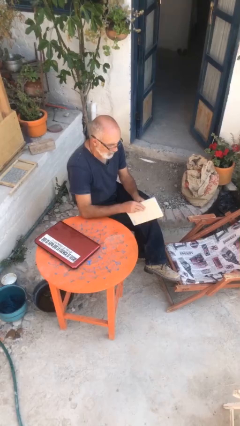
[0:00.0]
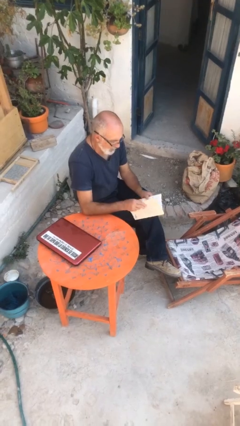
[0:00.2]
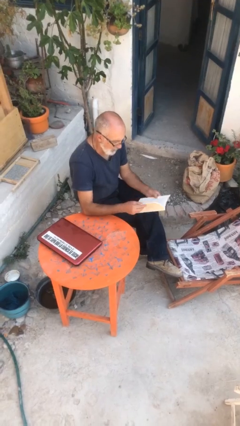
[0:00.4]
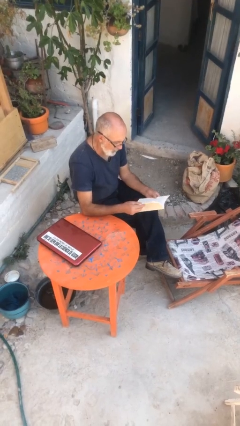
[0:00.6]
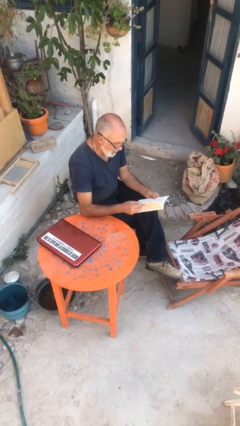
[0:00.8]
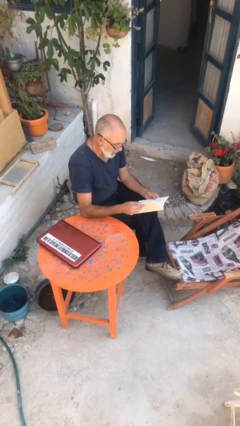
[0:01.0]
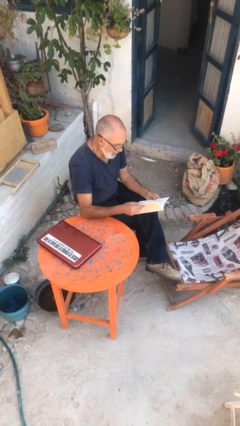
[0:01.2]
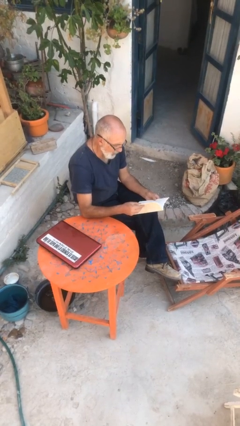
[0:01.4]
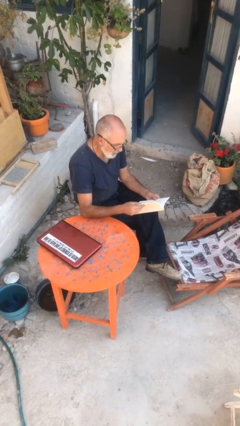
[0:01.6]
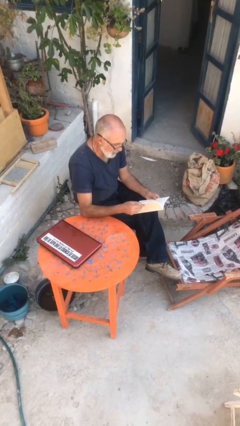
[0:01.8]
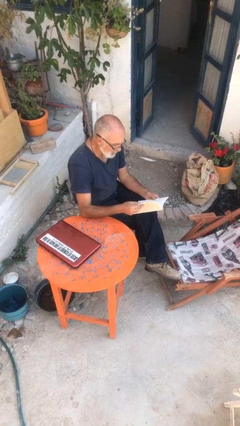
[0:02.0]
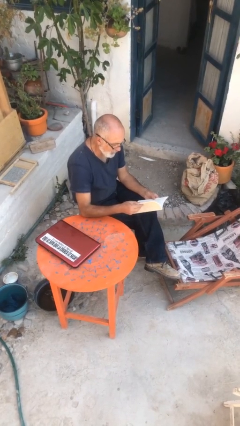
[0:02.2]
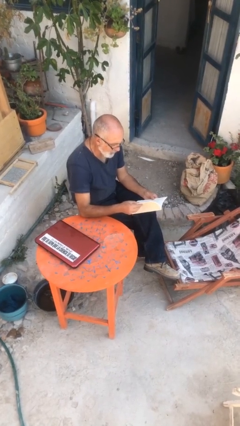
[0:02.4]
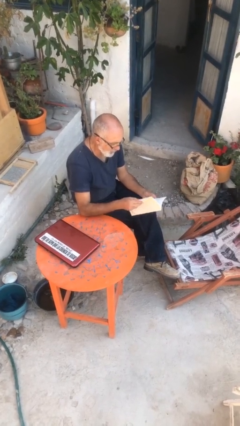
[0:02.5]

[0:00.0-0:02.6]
person reads document

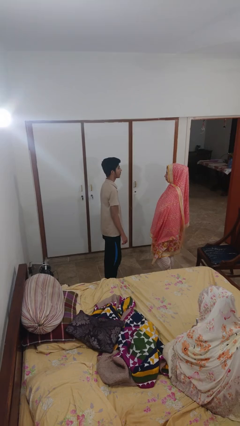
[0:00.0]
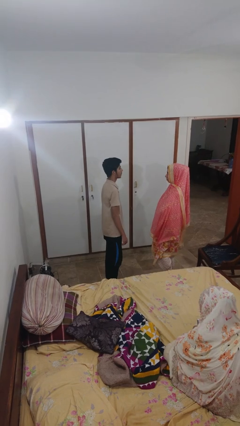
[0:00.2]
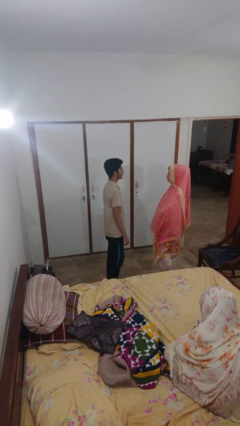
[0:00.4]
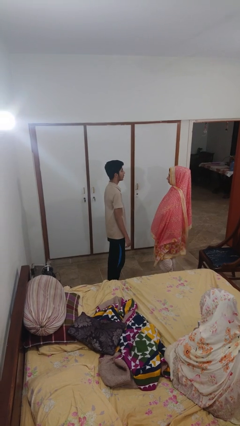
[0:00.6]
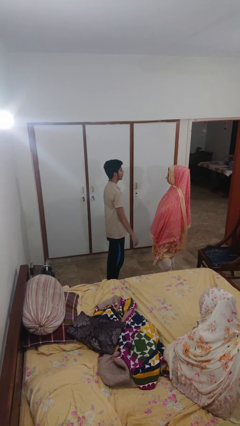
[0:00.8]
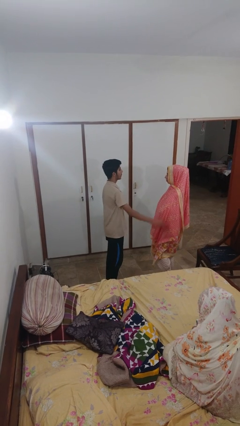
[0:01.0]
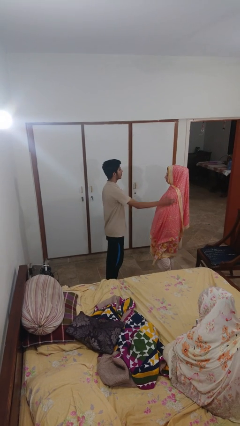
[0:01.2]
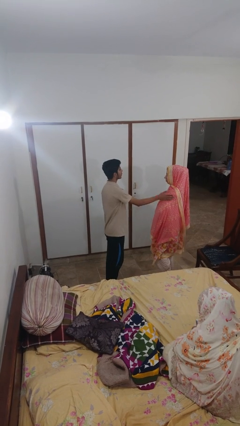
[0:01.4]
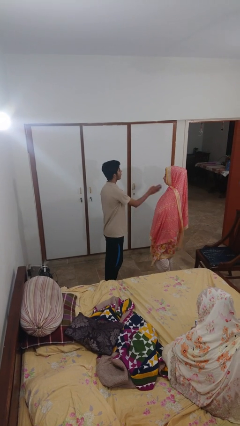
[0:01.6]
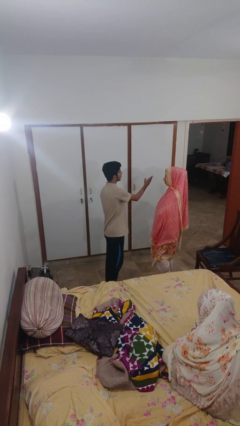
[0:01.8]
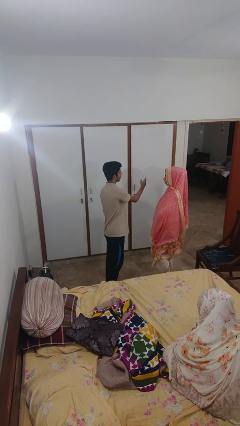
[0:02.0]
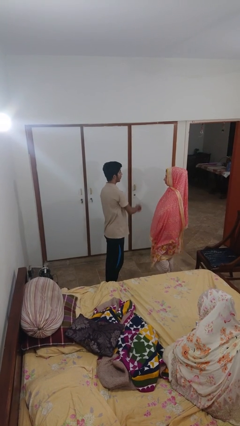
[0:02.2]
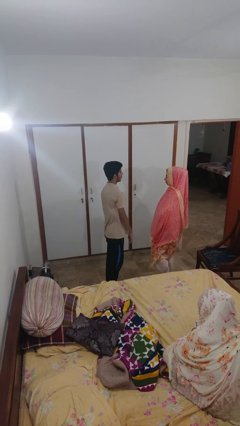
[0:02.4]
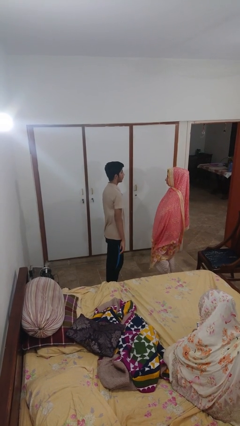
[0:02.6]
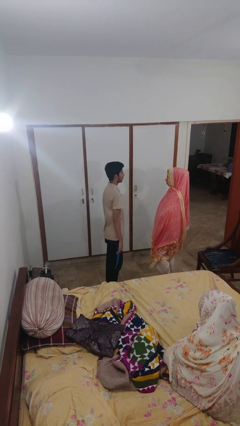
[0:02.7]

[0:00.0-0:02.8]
person shoves person

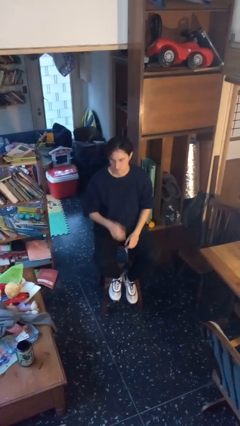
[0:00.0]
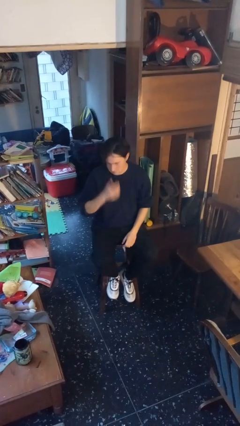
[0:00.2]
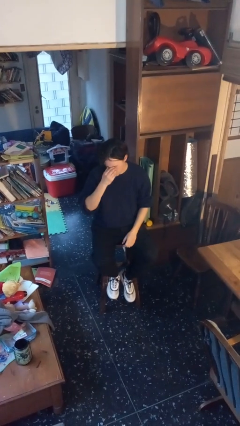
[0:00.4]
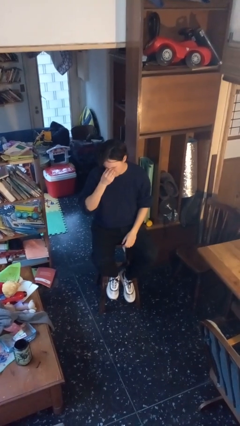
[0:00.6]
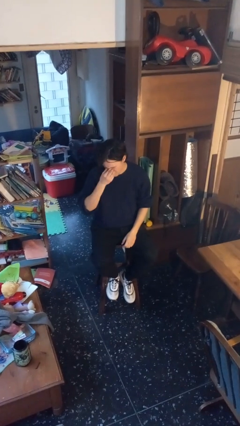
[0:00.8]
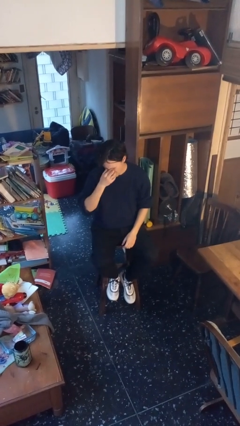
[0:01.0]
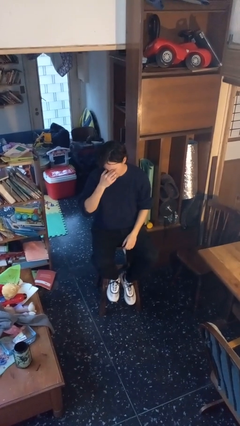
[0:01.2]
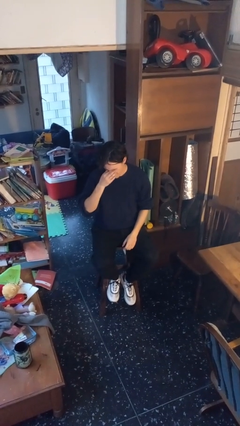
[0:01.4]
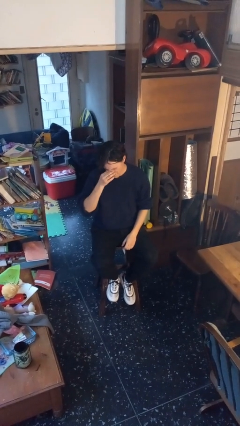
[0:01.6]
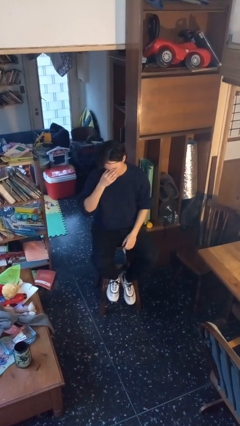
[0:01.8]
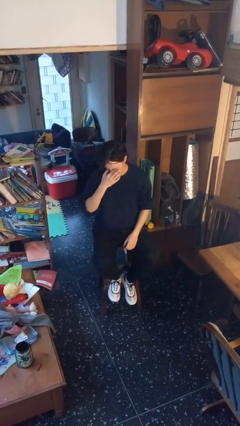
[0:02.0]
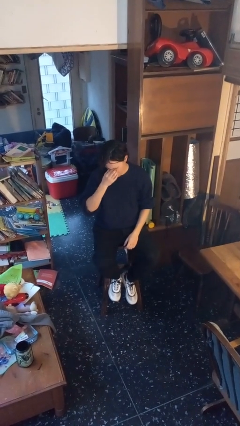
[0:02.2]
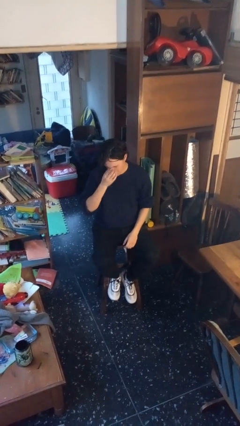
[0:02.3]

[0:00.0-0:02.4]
person rubs eyes

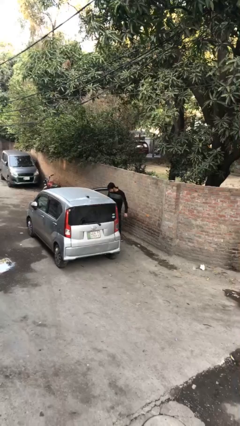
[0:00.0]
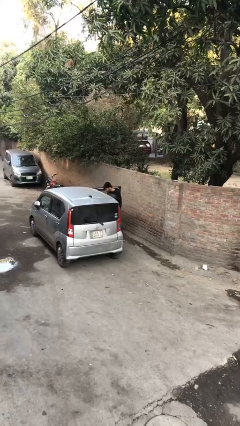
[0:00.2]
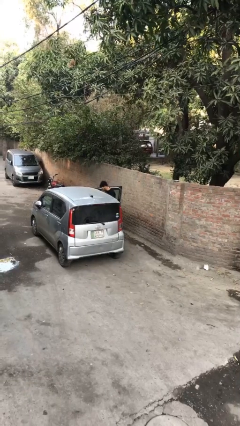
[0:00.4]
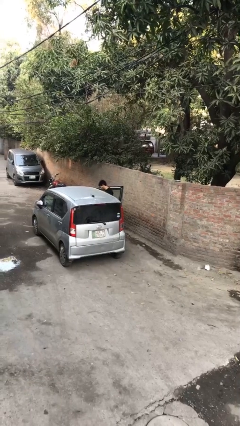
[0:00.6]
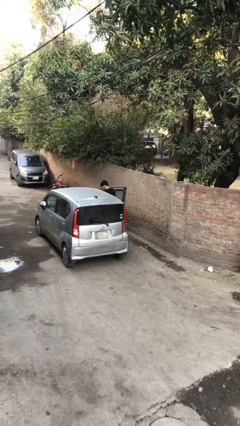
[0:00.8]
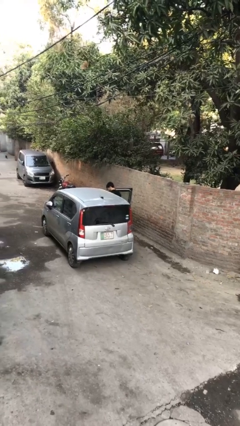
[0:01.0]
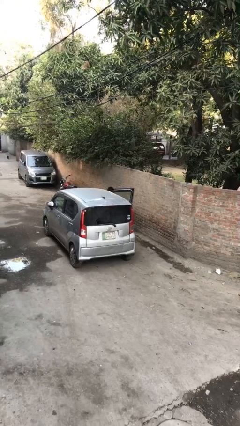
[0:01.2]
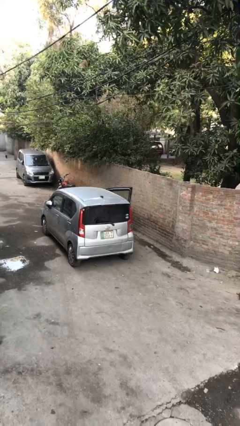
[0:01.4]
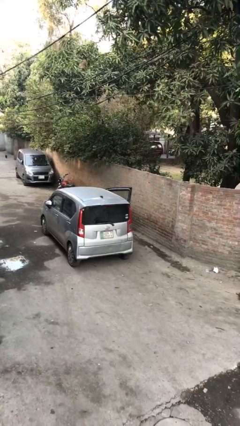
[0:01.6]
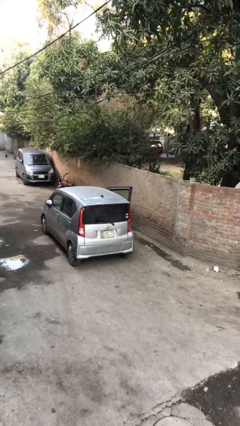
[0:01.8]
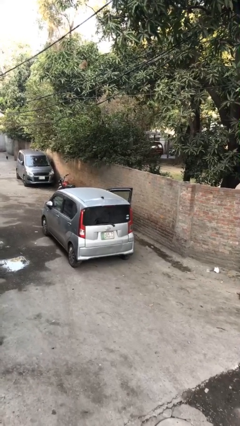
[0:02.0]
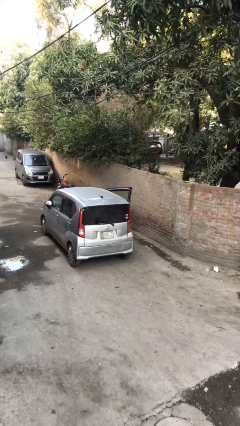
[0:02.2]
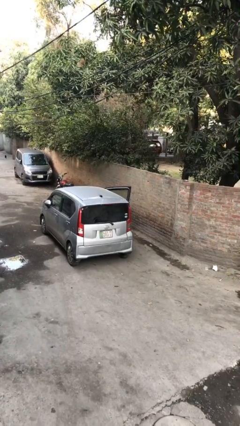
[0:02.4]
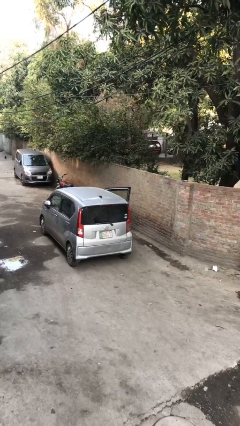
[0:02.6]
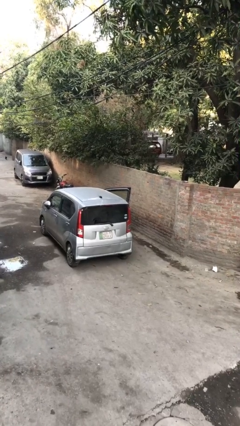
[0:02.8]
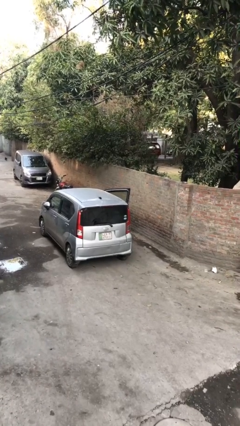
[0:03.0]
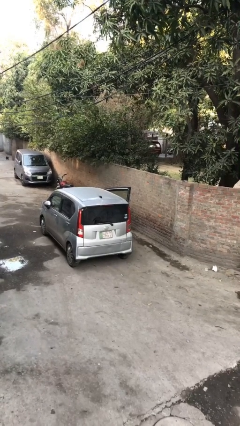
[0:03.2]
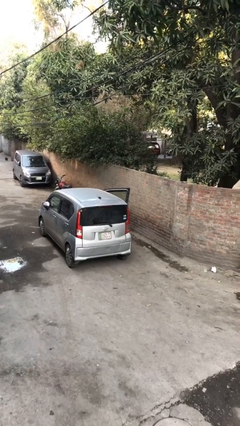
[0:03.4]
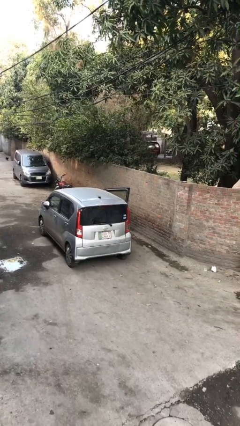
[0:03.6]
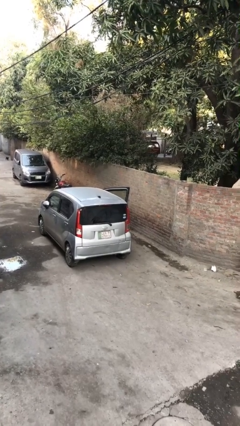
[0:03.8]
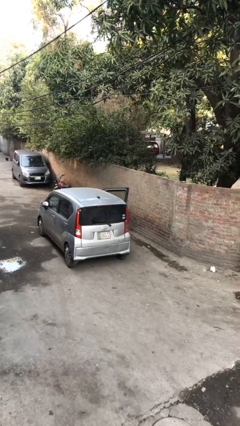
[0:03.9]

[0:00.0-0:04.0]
person enters car

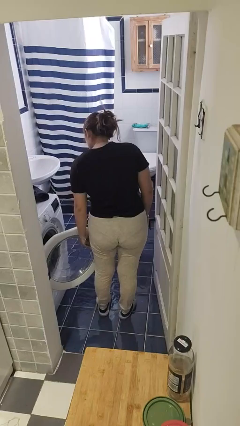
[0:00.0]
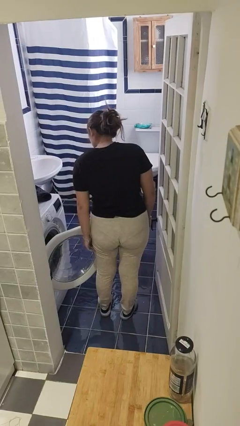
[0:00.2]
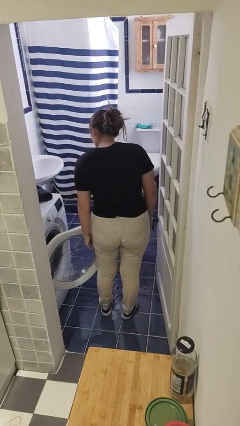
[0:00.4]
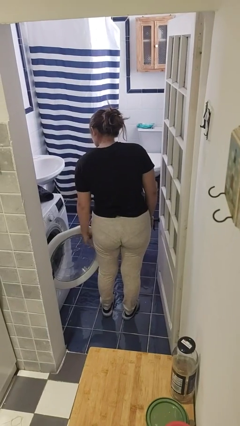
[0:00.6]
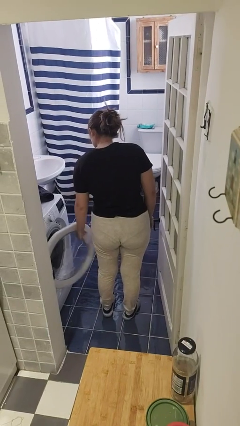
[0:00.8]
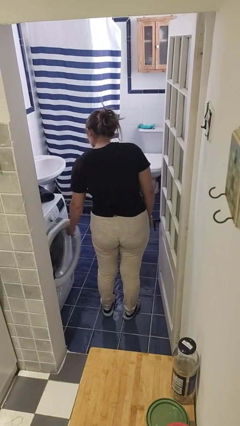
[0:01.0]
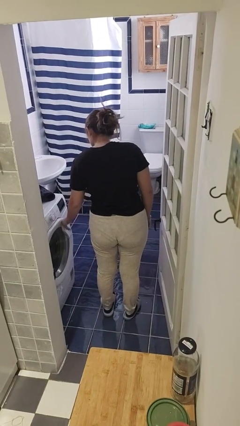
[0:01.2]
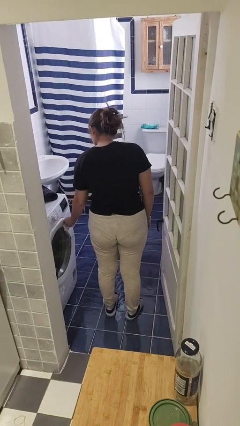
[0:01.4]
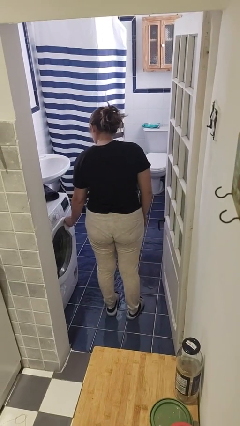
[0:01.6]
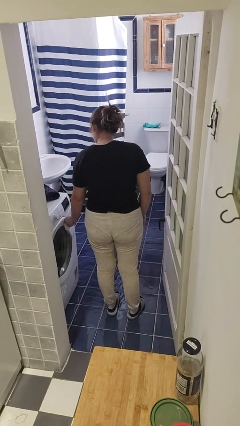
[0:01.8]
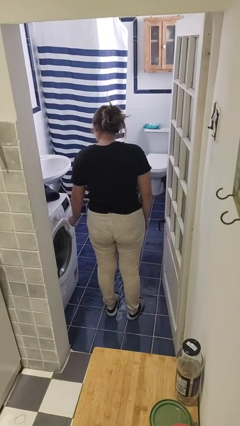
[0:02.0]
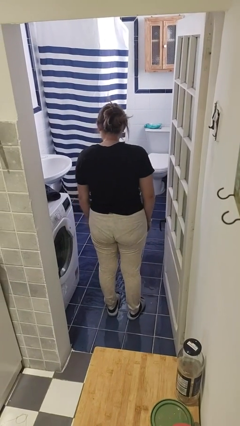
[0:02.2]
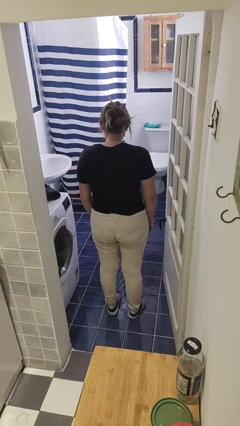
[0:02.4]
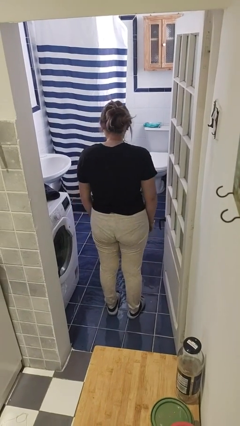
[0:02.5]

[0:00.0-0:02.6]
person closes clothes washer

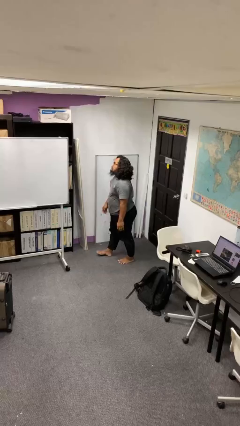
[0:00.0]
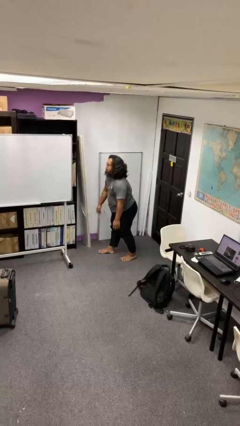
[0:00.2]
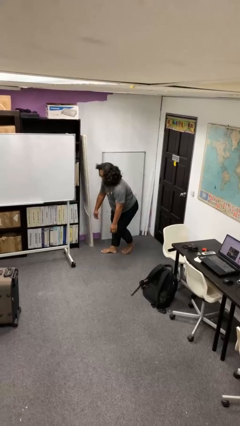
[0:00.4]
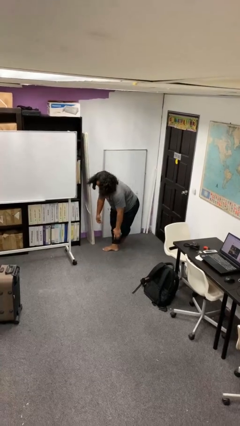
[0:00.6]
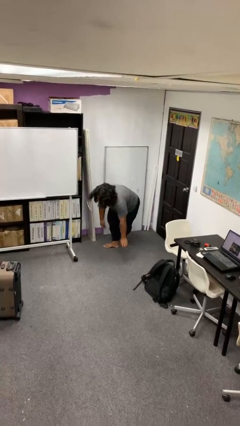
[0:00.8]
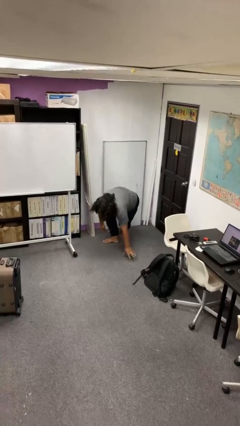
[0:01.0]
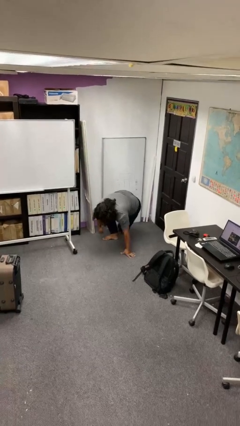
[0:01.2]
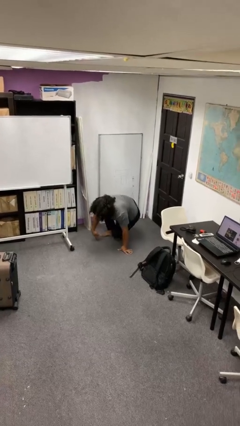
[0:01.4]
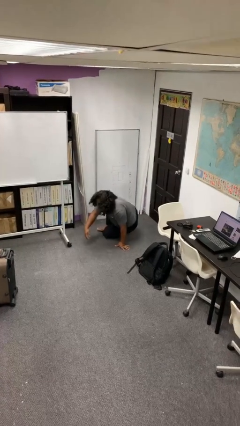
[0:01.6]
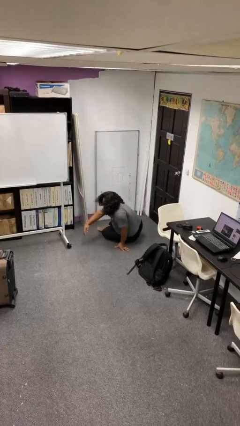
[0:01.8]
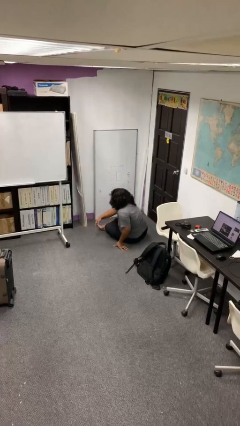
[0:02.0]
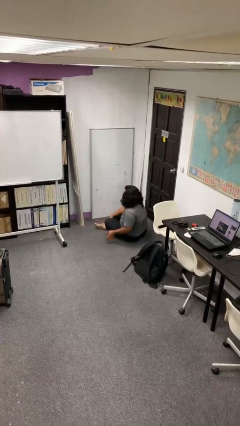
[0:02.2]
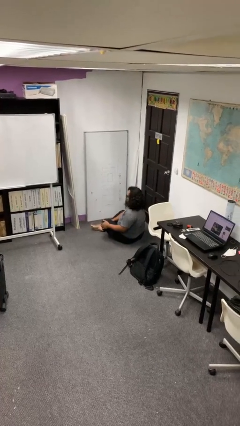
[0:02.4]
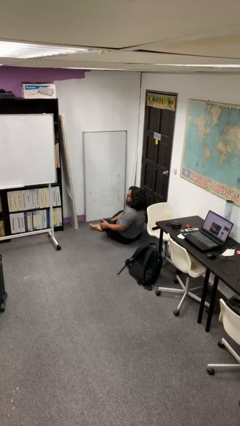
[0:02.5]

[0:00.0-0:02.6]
person sits crisscross

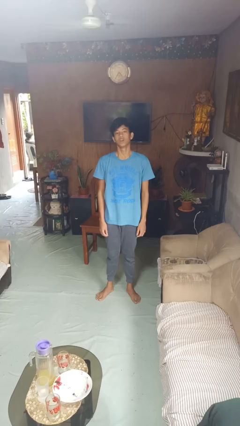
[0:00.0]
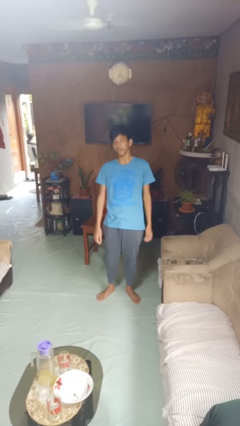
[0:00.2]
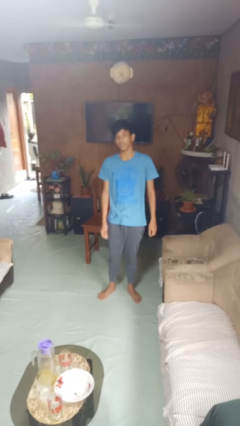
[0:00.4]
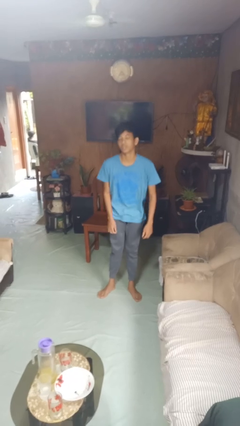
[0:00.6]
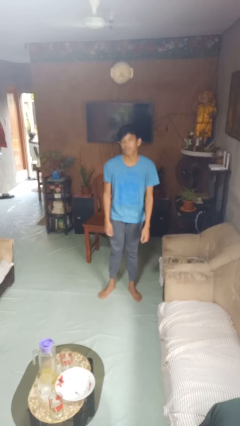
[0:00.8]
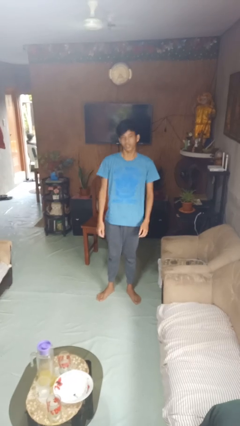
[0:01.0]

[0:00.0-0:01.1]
person dances in place
